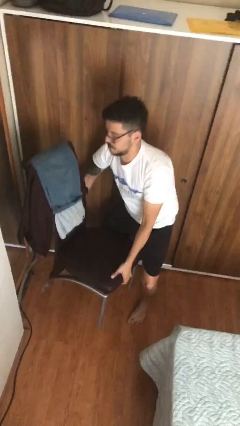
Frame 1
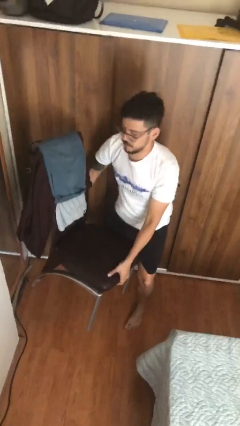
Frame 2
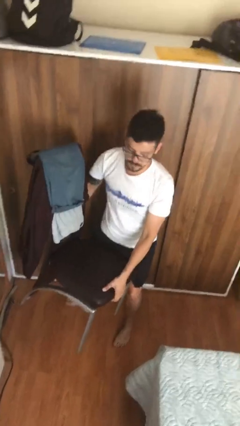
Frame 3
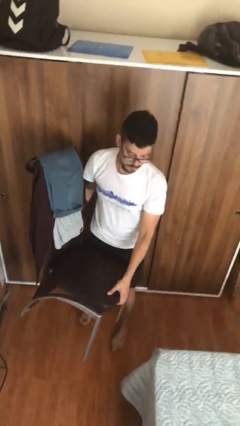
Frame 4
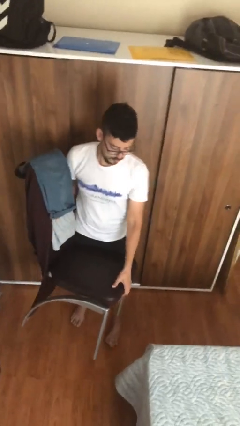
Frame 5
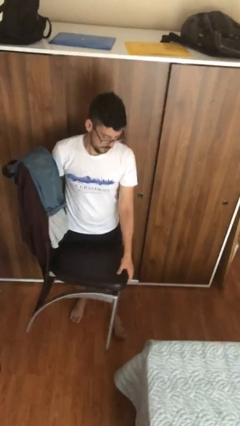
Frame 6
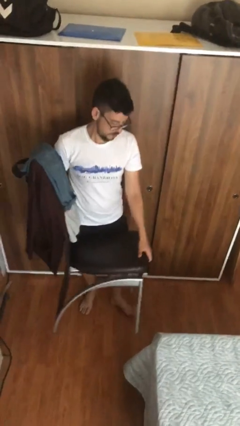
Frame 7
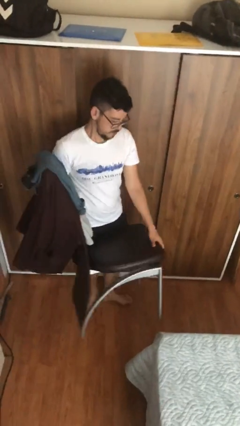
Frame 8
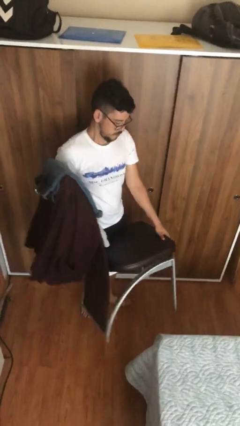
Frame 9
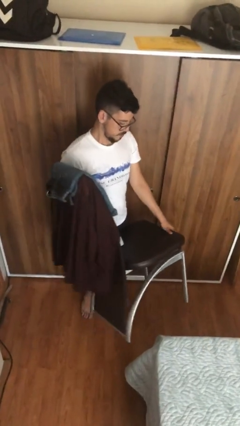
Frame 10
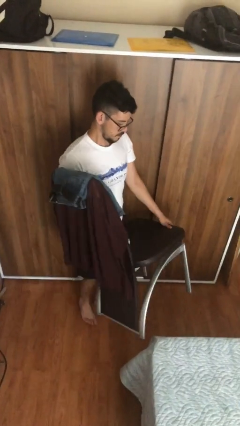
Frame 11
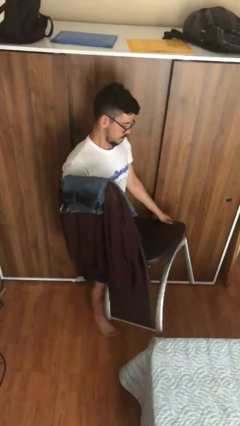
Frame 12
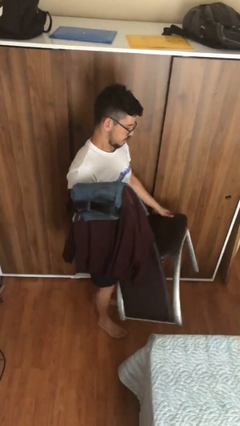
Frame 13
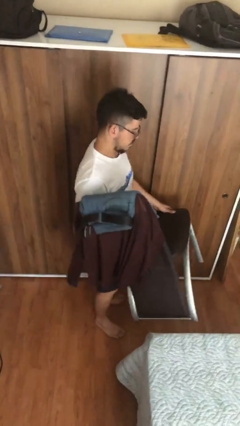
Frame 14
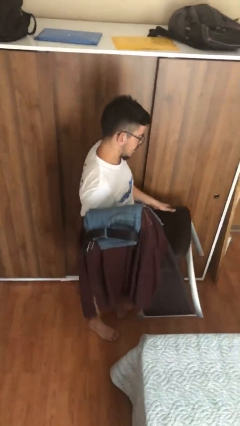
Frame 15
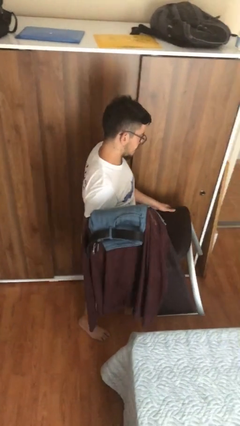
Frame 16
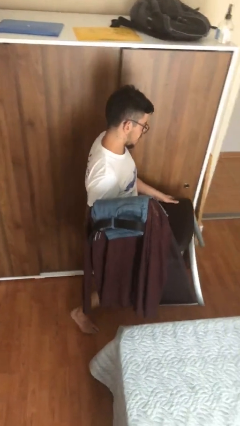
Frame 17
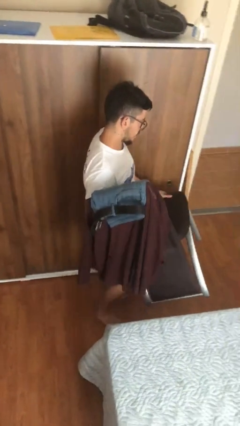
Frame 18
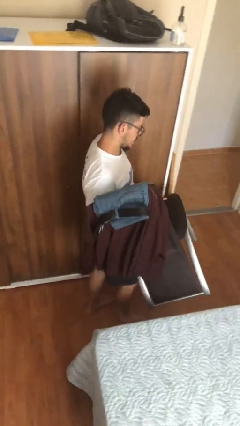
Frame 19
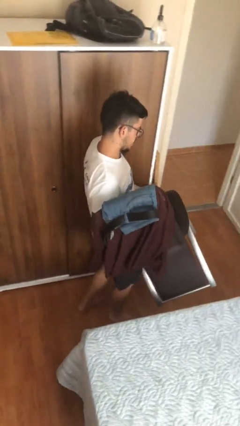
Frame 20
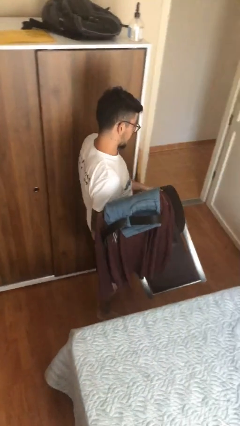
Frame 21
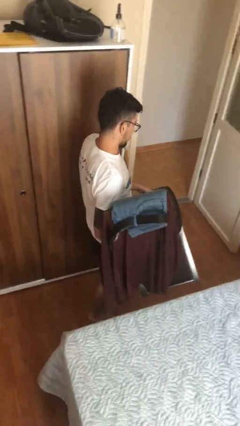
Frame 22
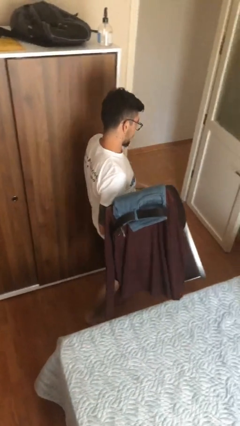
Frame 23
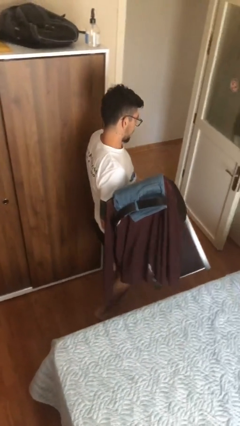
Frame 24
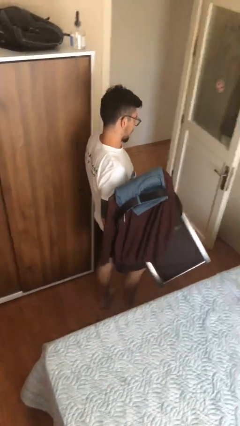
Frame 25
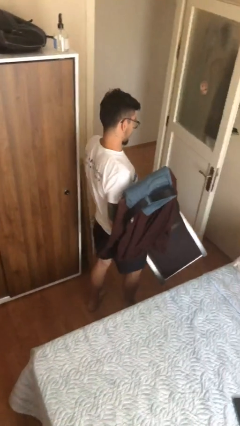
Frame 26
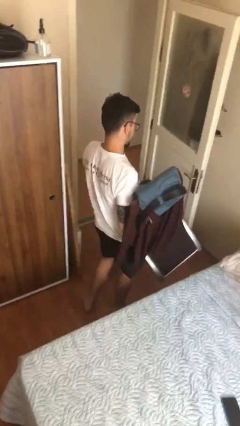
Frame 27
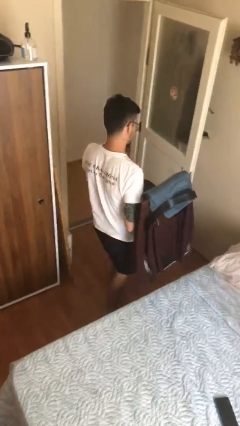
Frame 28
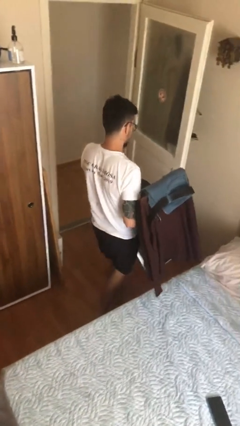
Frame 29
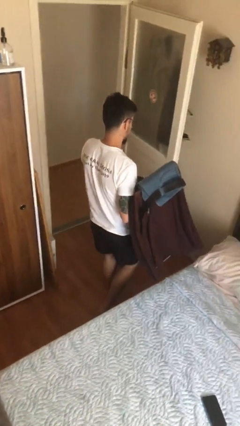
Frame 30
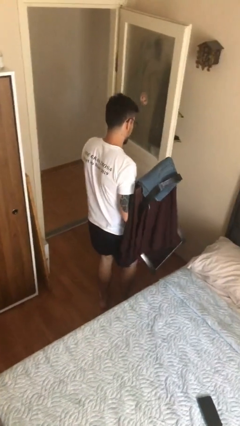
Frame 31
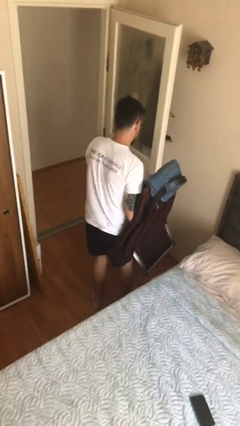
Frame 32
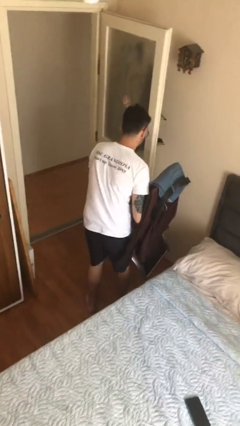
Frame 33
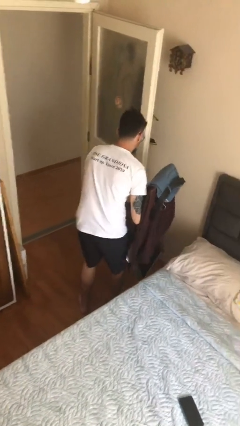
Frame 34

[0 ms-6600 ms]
person carries heavy object

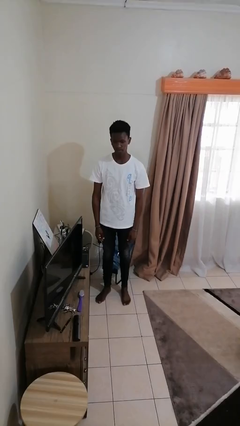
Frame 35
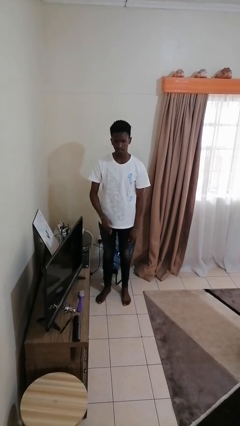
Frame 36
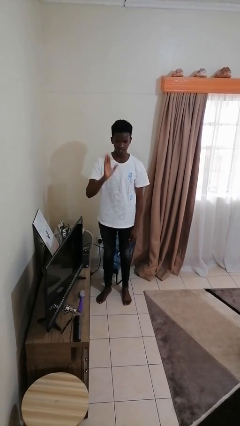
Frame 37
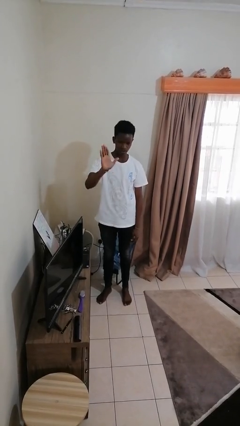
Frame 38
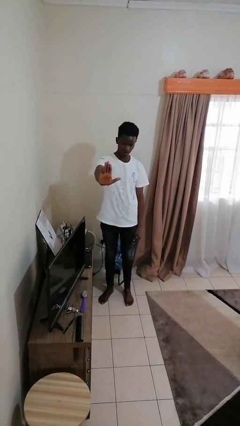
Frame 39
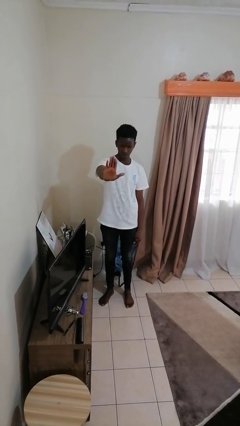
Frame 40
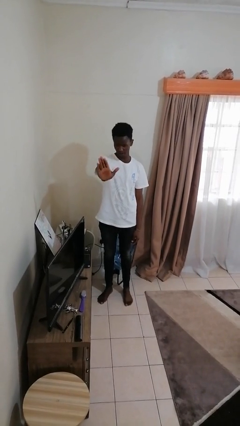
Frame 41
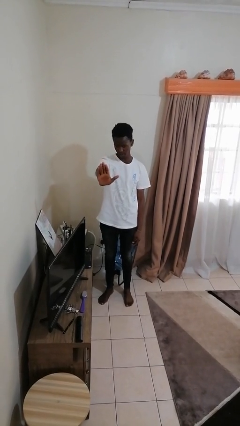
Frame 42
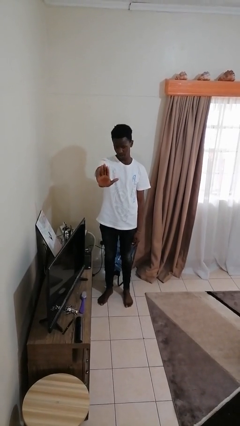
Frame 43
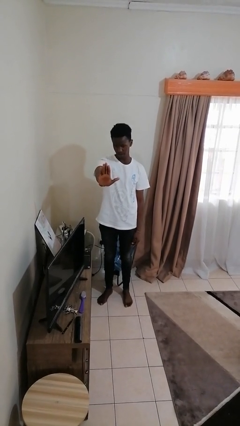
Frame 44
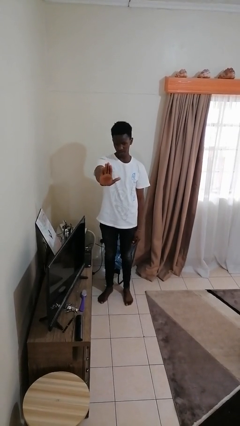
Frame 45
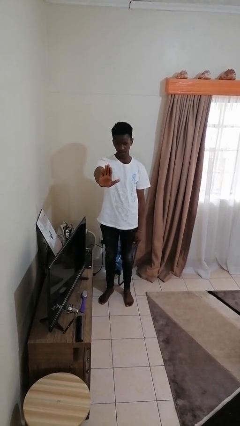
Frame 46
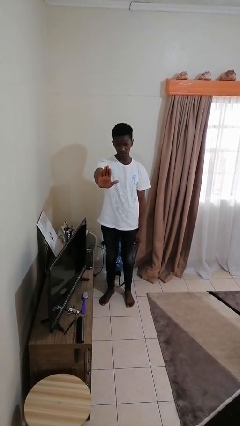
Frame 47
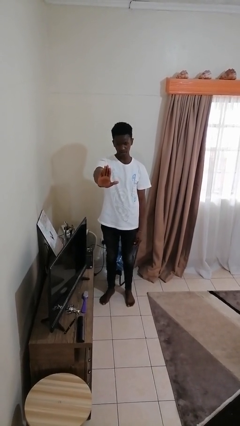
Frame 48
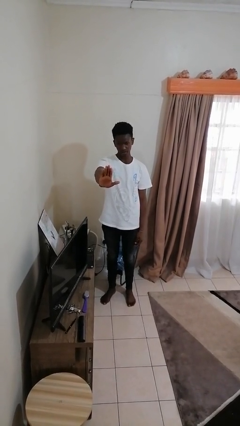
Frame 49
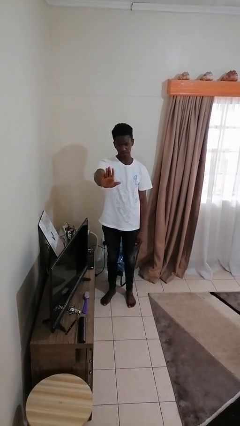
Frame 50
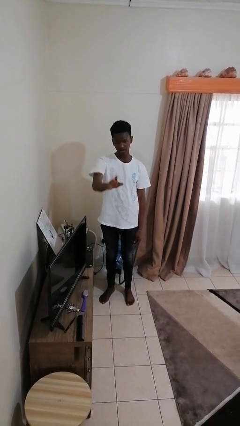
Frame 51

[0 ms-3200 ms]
person gestures stop

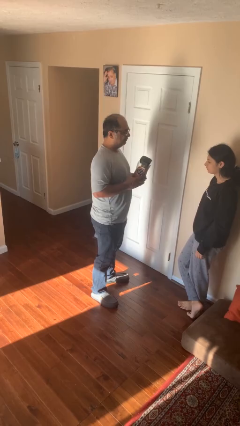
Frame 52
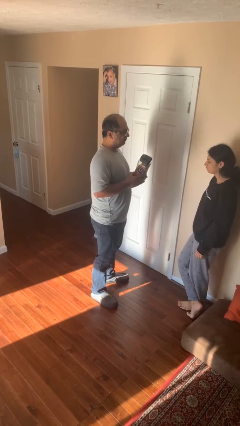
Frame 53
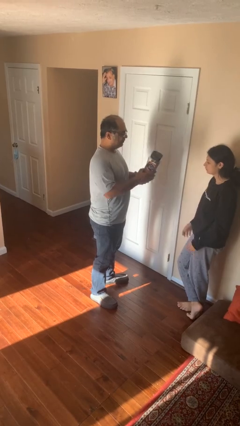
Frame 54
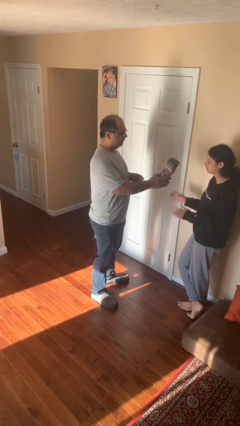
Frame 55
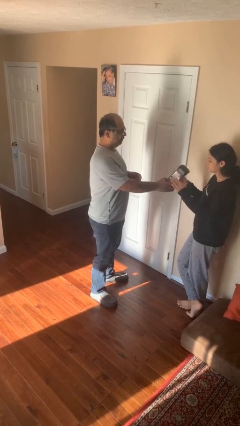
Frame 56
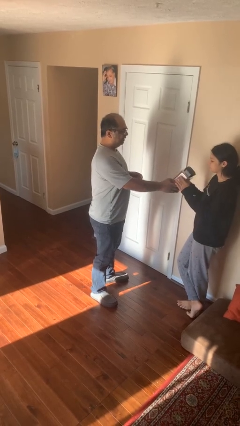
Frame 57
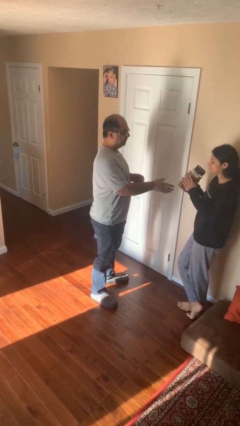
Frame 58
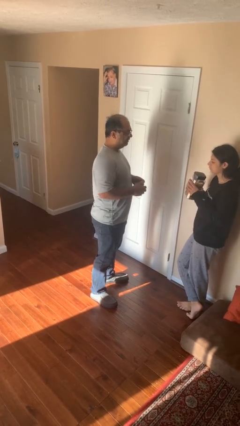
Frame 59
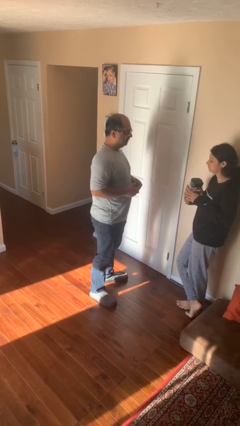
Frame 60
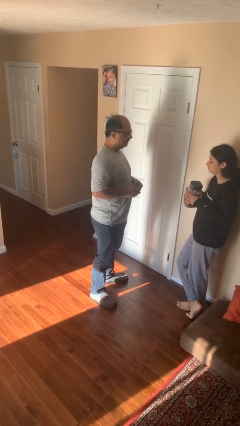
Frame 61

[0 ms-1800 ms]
person transfers object to person

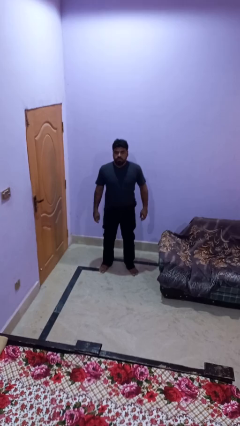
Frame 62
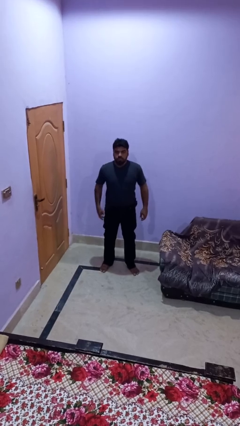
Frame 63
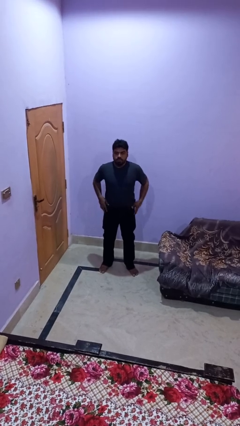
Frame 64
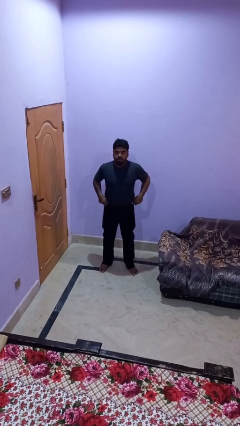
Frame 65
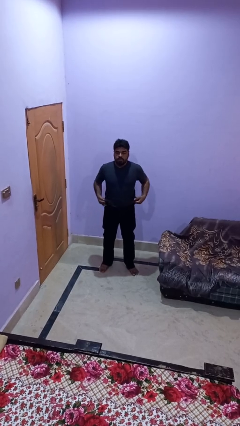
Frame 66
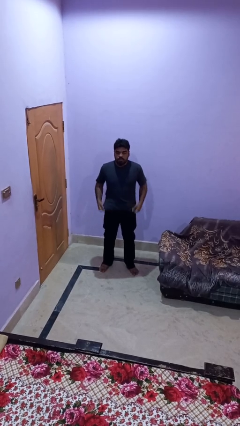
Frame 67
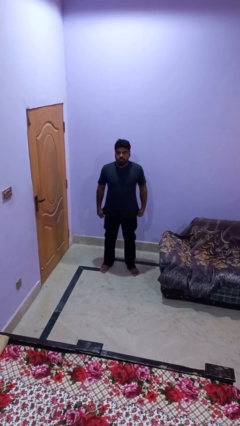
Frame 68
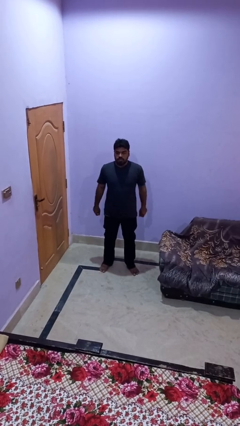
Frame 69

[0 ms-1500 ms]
person untucks shirt

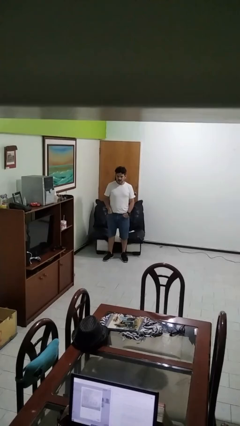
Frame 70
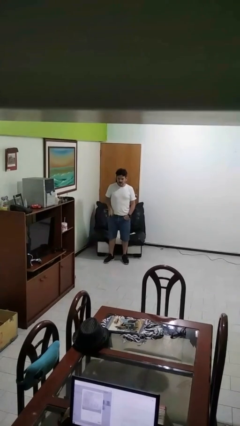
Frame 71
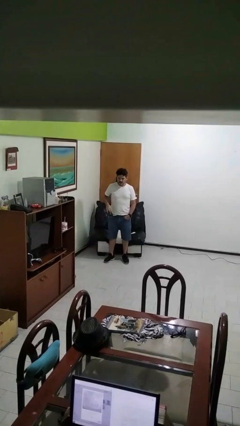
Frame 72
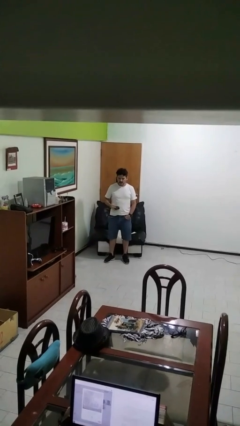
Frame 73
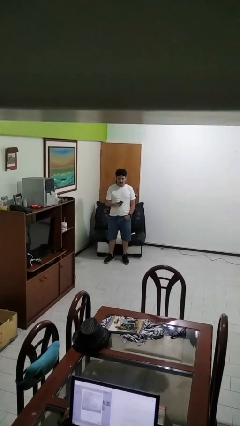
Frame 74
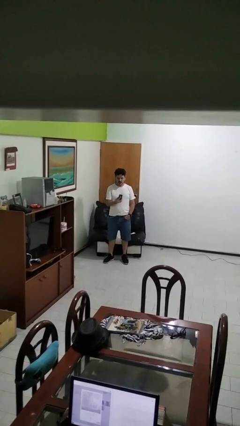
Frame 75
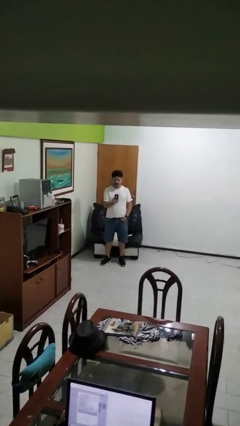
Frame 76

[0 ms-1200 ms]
person takes phone from pocket

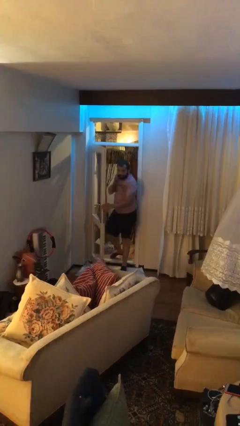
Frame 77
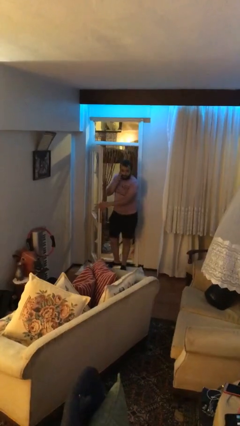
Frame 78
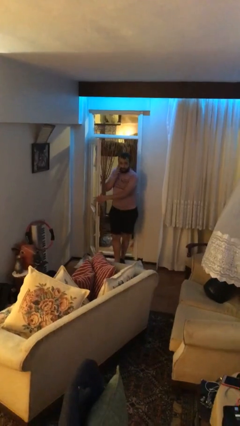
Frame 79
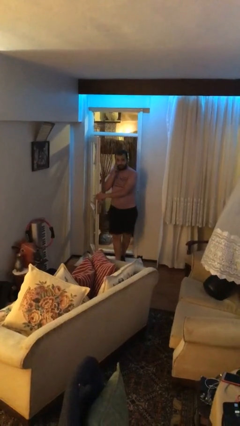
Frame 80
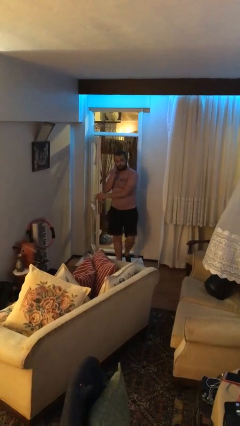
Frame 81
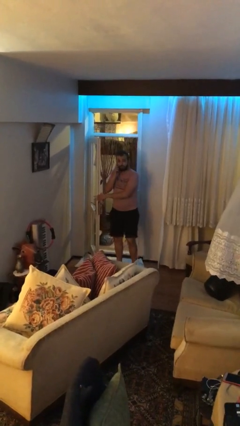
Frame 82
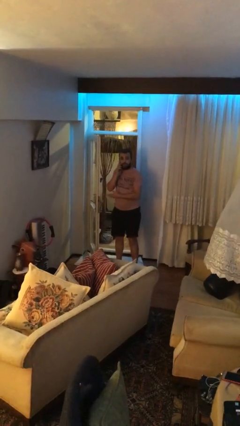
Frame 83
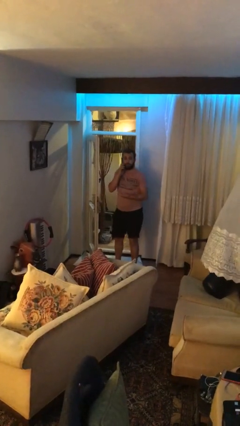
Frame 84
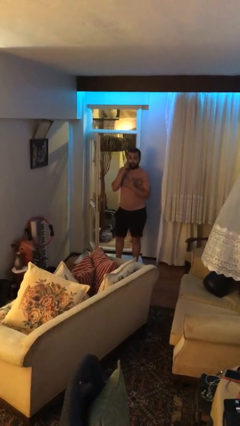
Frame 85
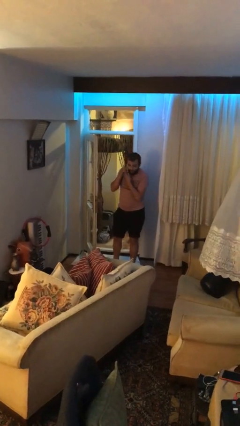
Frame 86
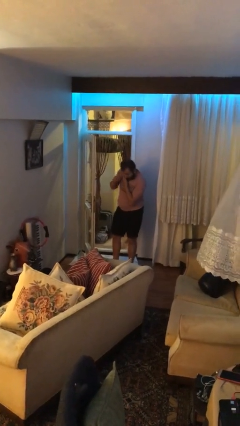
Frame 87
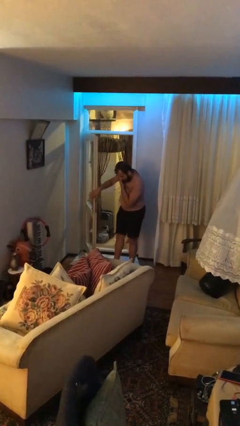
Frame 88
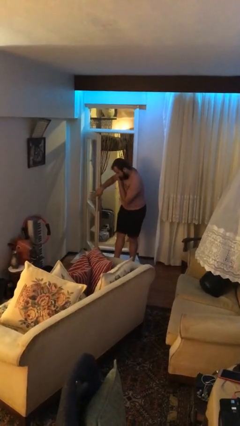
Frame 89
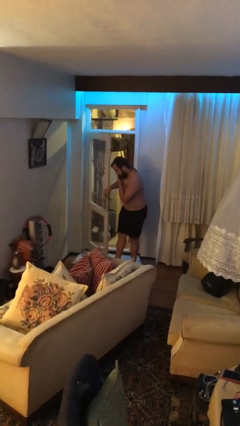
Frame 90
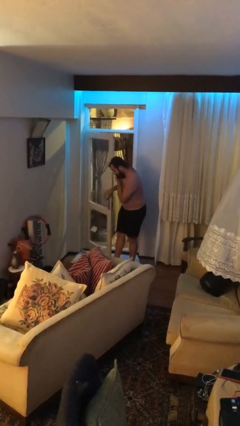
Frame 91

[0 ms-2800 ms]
person enters scene through structure

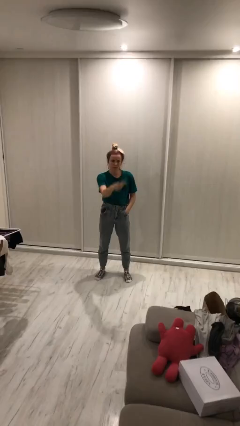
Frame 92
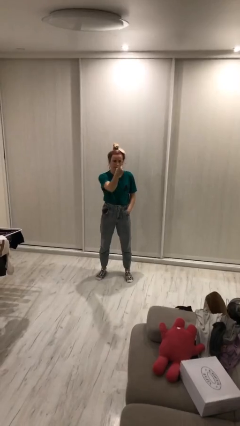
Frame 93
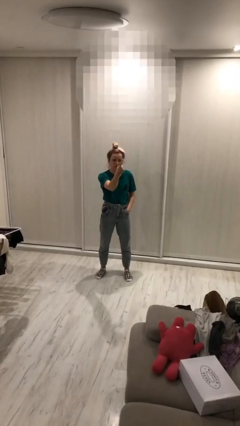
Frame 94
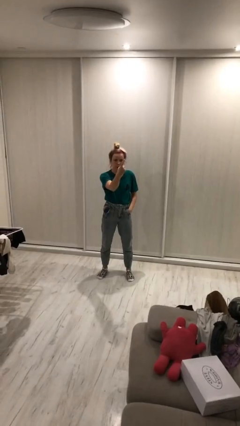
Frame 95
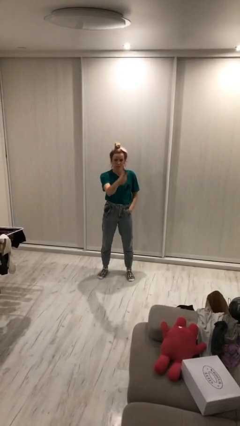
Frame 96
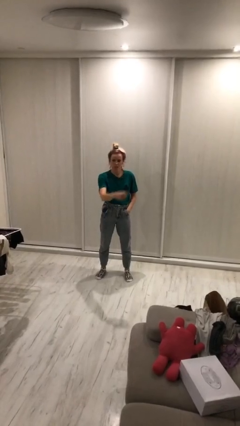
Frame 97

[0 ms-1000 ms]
person gestures number one
